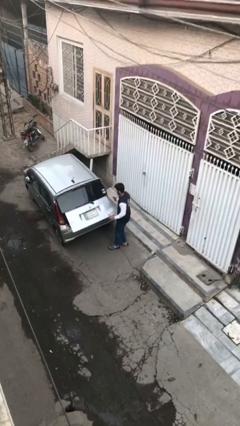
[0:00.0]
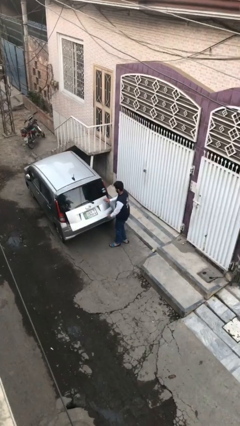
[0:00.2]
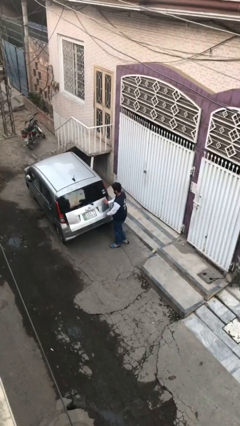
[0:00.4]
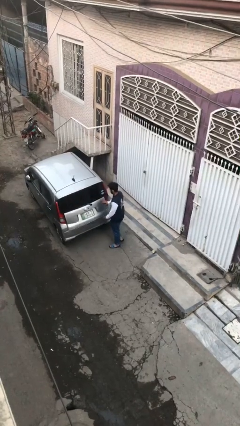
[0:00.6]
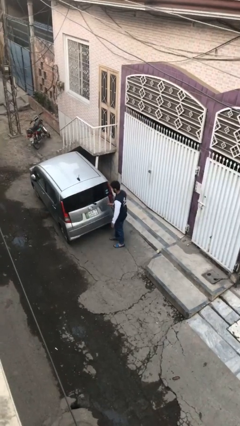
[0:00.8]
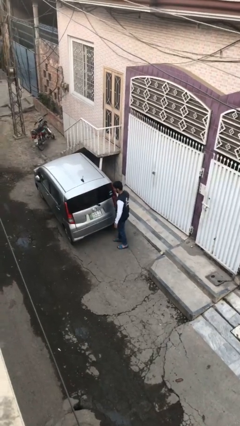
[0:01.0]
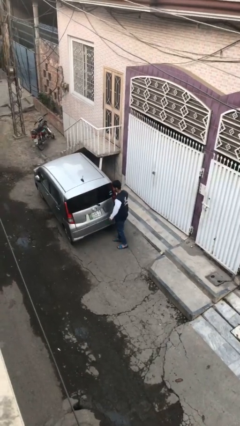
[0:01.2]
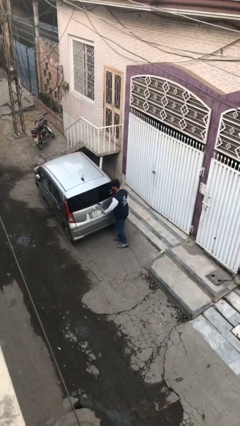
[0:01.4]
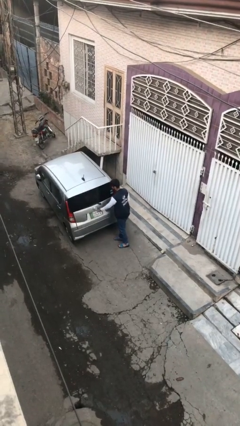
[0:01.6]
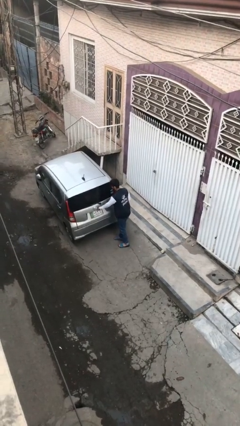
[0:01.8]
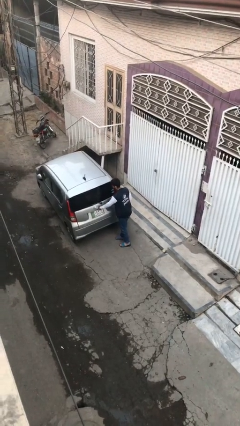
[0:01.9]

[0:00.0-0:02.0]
person closes car trunk

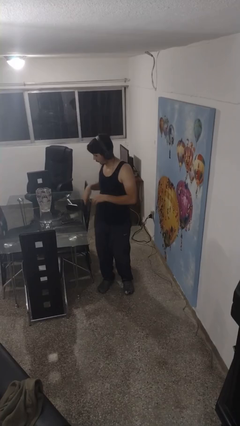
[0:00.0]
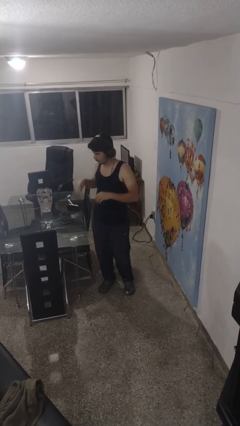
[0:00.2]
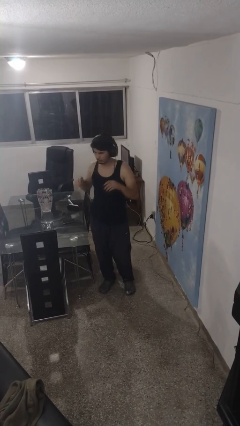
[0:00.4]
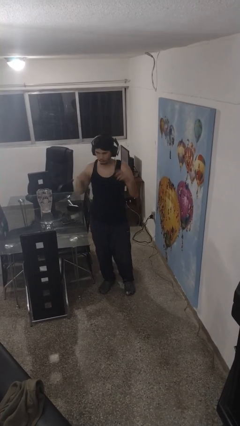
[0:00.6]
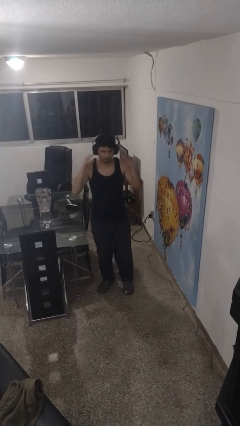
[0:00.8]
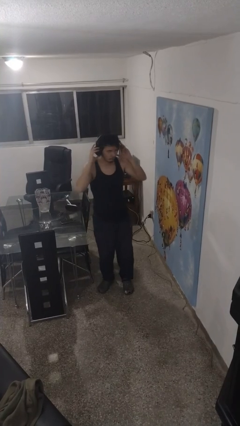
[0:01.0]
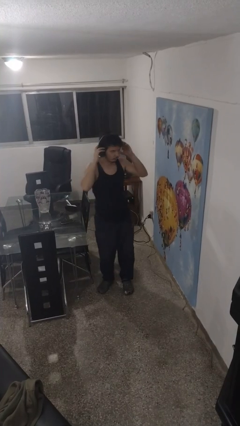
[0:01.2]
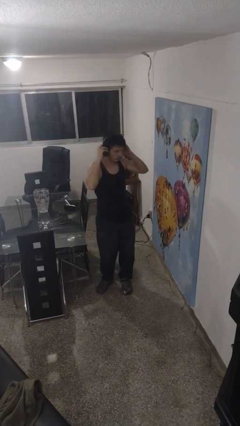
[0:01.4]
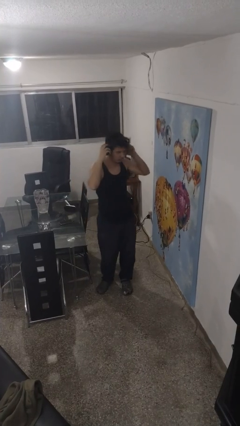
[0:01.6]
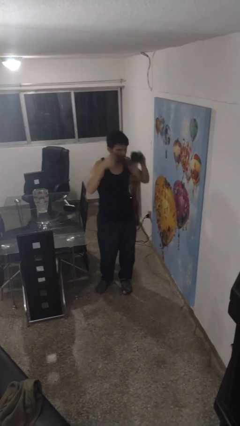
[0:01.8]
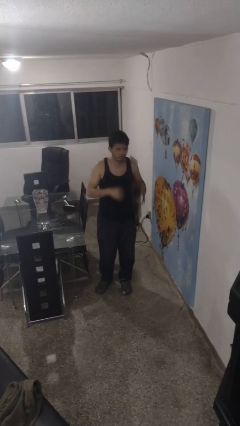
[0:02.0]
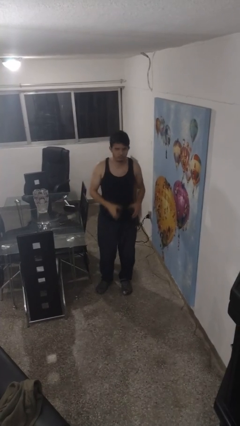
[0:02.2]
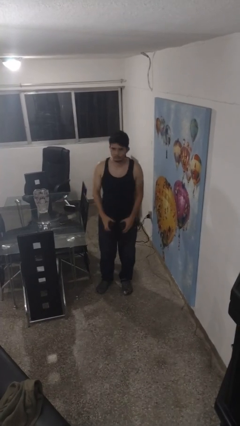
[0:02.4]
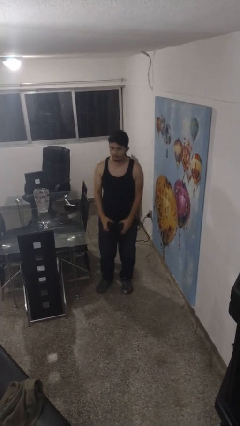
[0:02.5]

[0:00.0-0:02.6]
person takes off headphones

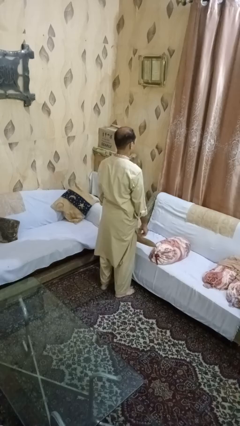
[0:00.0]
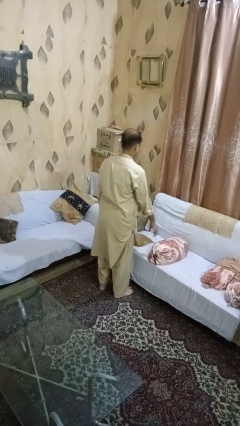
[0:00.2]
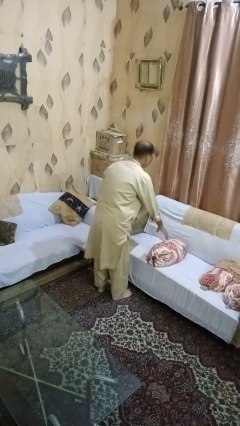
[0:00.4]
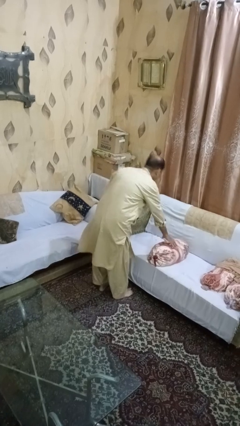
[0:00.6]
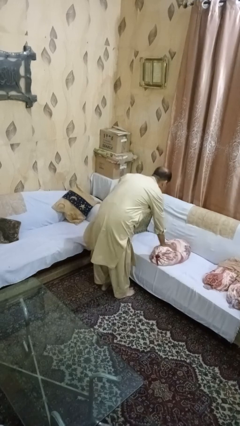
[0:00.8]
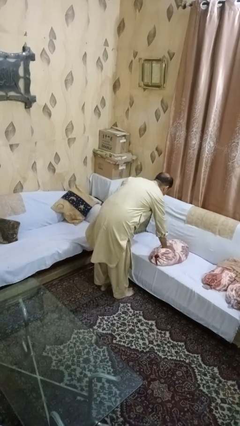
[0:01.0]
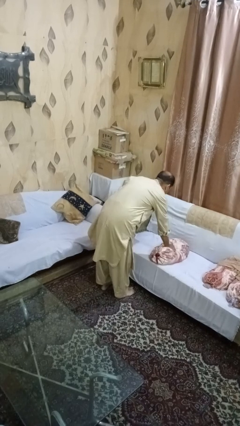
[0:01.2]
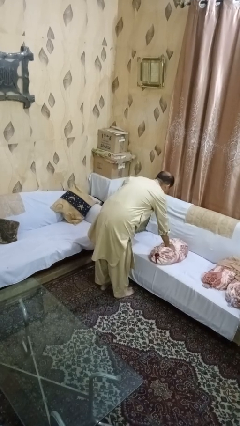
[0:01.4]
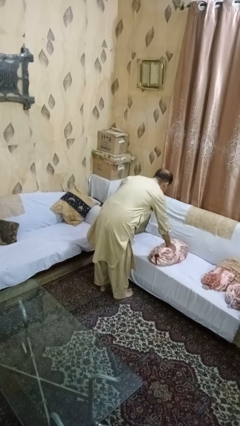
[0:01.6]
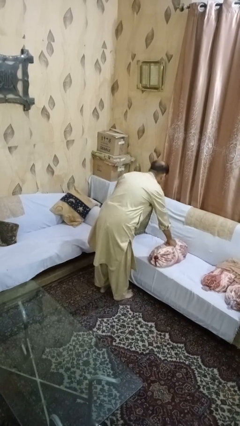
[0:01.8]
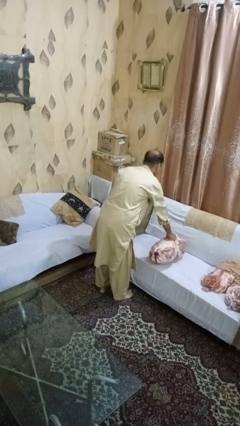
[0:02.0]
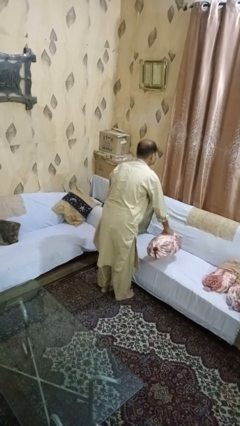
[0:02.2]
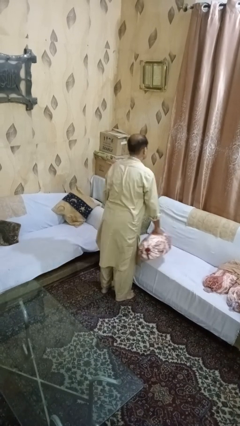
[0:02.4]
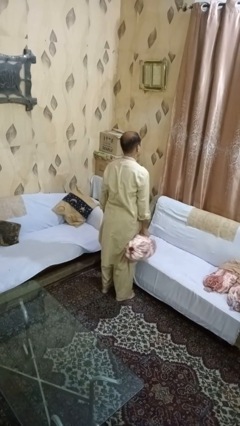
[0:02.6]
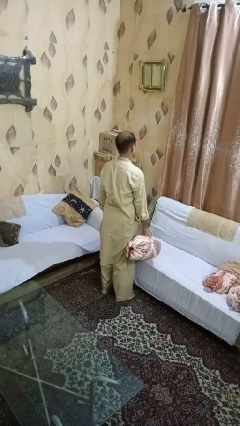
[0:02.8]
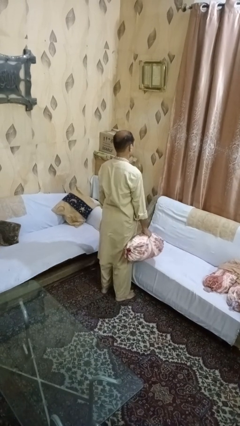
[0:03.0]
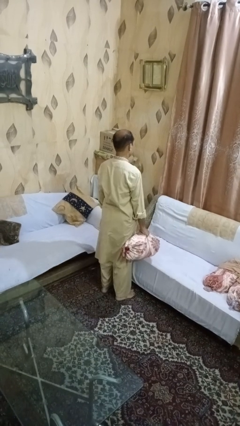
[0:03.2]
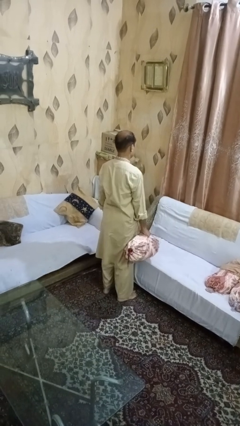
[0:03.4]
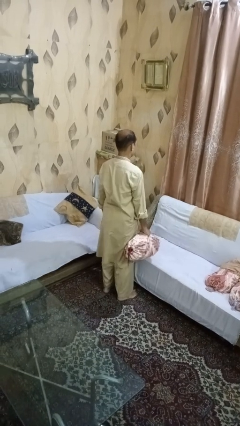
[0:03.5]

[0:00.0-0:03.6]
person picks up object from couch

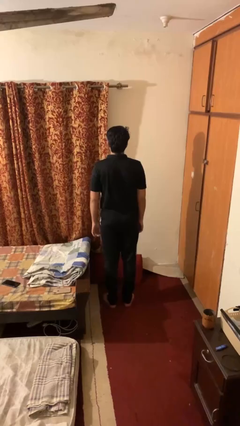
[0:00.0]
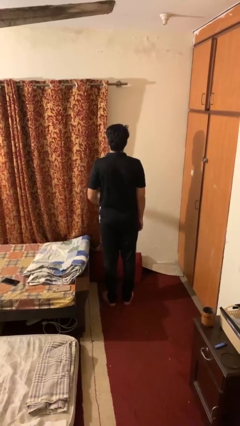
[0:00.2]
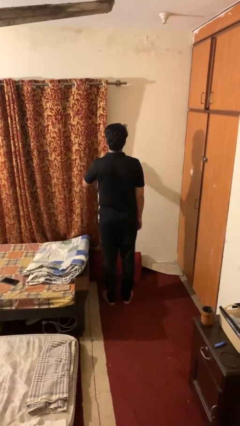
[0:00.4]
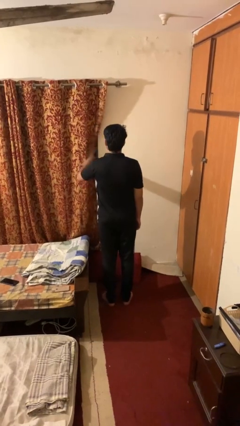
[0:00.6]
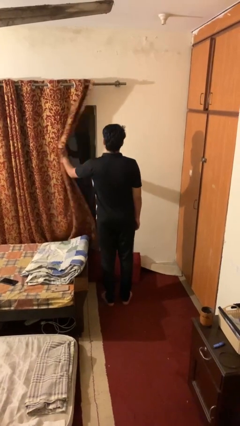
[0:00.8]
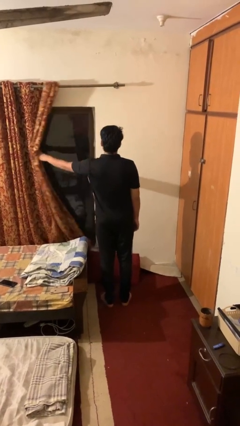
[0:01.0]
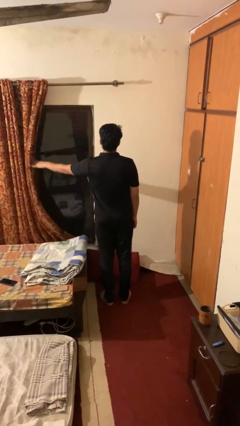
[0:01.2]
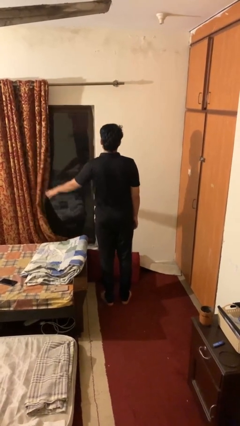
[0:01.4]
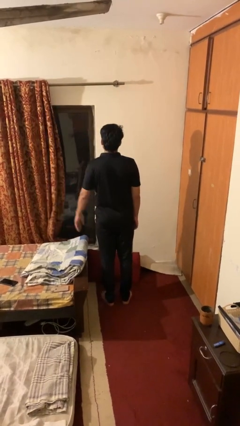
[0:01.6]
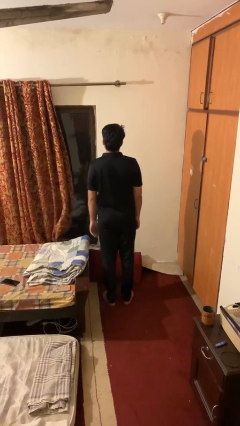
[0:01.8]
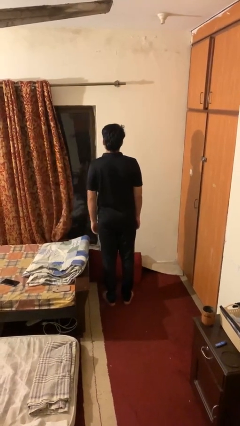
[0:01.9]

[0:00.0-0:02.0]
person opens curtains

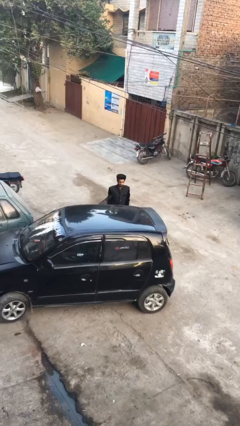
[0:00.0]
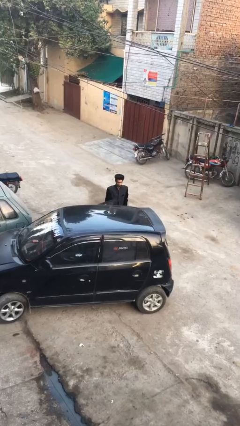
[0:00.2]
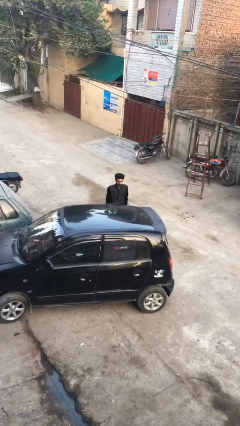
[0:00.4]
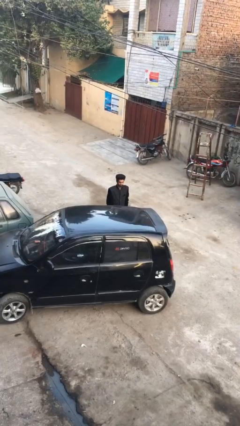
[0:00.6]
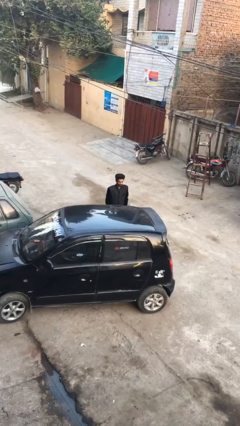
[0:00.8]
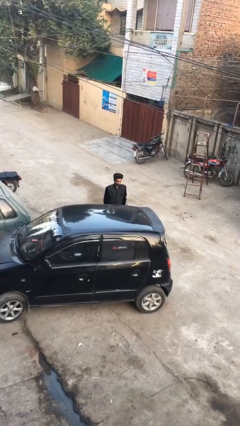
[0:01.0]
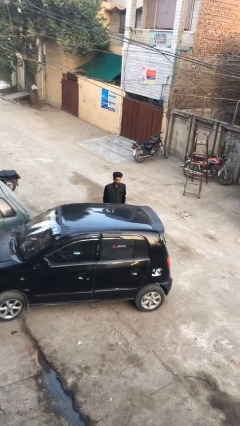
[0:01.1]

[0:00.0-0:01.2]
person closes car door

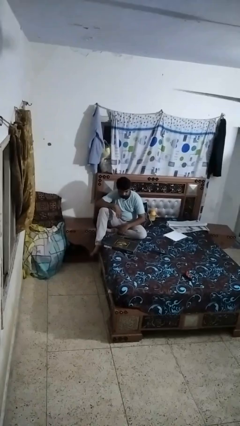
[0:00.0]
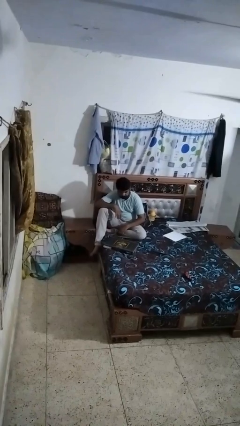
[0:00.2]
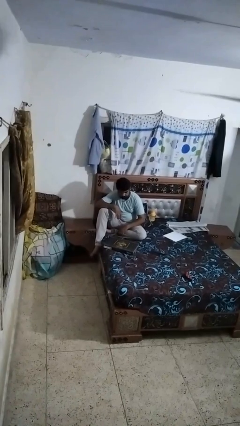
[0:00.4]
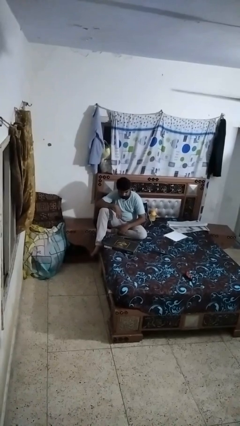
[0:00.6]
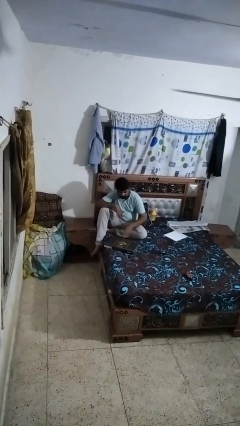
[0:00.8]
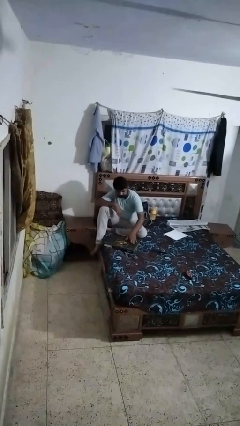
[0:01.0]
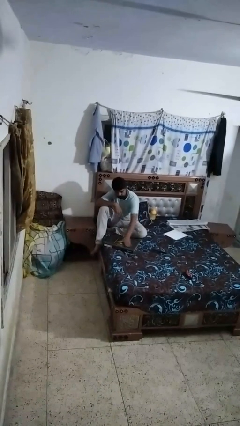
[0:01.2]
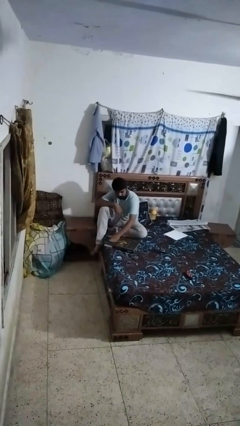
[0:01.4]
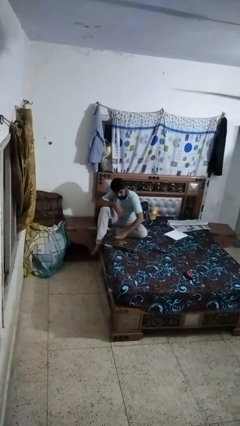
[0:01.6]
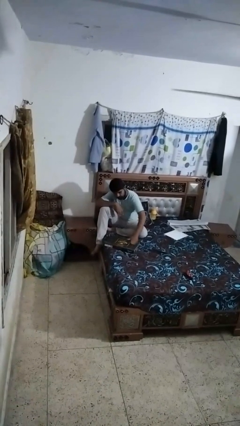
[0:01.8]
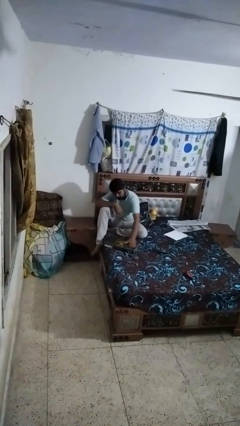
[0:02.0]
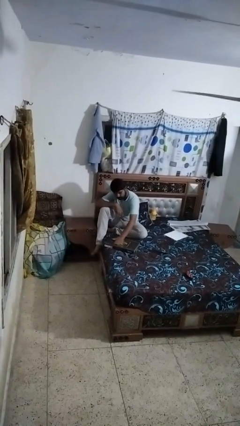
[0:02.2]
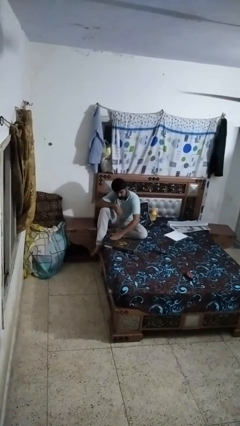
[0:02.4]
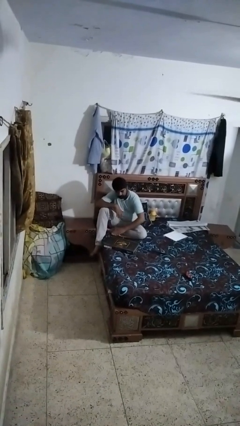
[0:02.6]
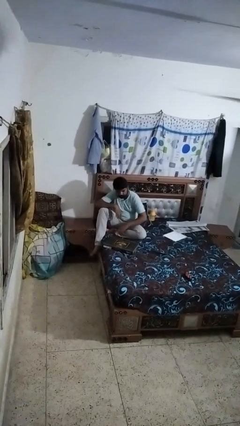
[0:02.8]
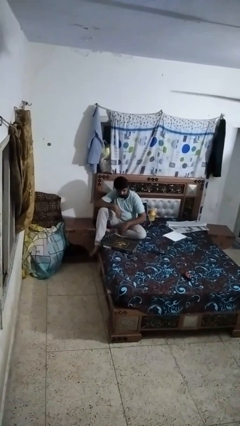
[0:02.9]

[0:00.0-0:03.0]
person waves hand over object

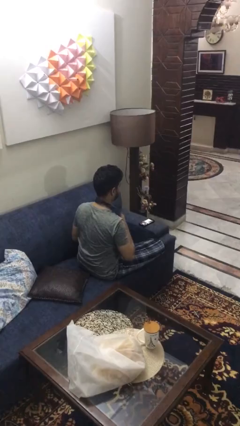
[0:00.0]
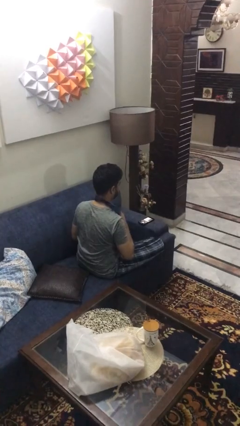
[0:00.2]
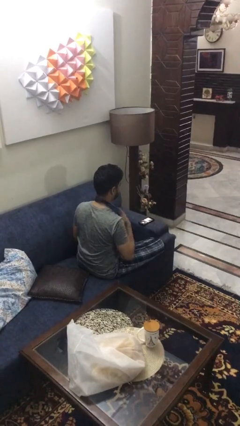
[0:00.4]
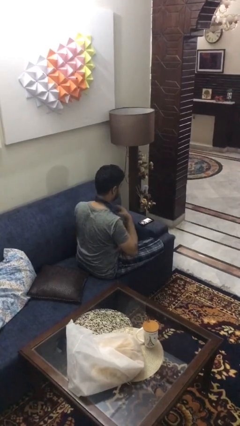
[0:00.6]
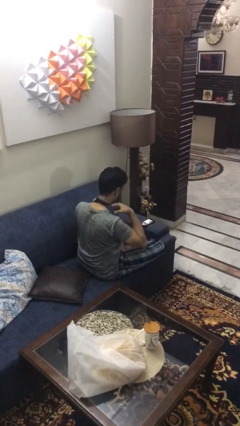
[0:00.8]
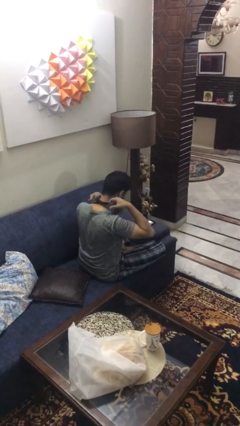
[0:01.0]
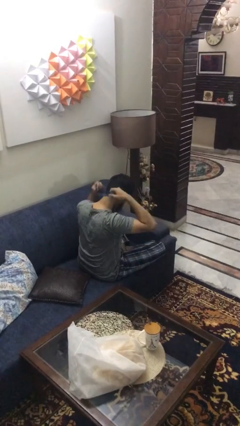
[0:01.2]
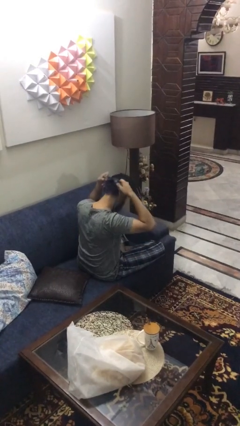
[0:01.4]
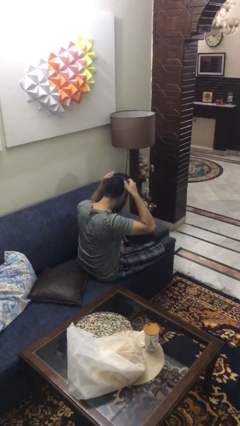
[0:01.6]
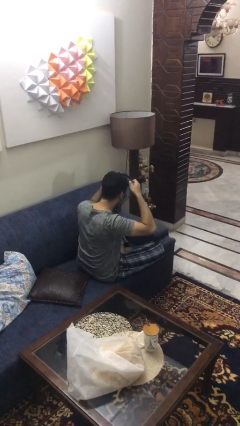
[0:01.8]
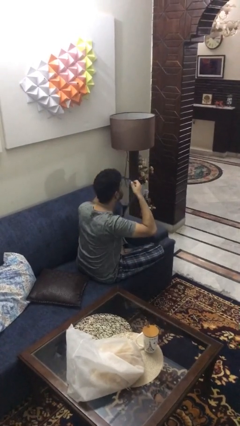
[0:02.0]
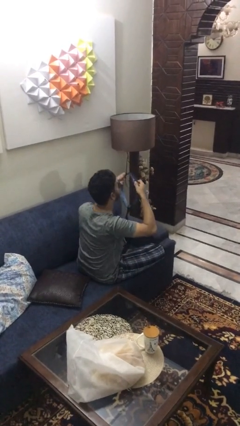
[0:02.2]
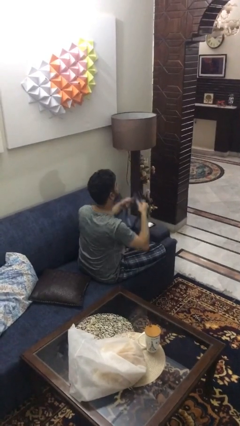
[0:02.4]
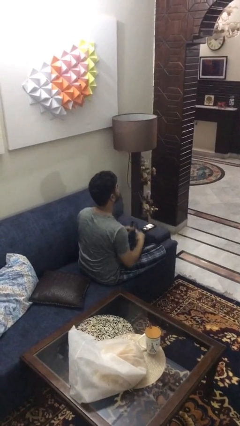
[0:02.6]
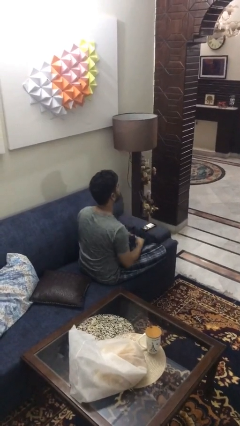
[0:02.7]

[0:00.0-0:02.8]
person takes off necktie
